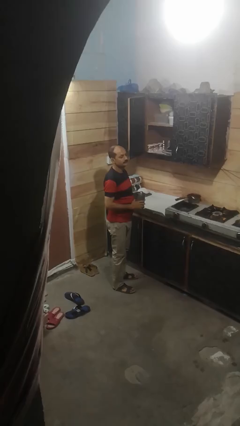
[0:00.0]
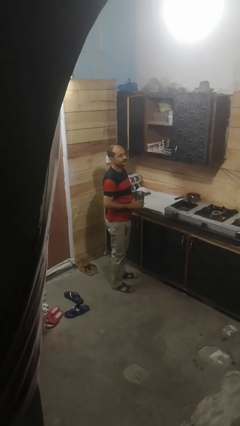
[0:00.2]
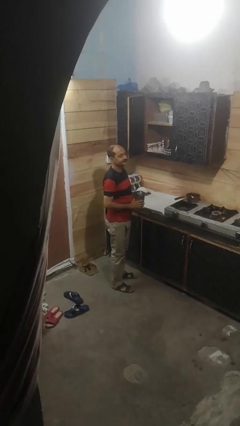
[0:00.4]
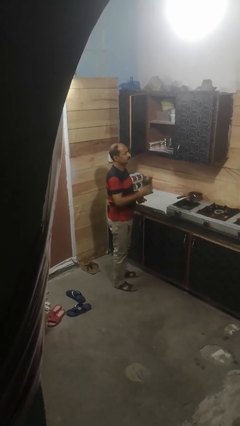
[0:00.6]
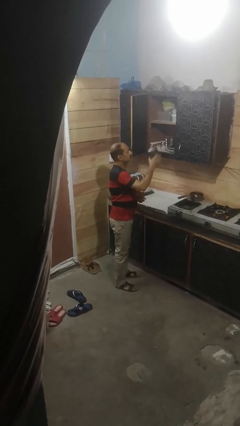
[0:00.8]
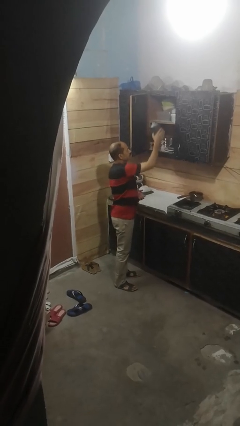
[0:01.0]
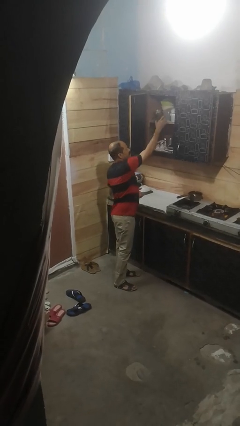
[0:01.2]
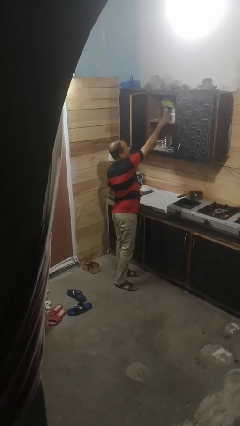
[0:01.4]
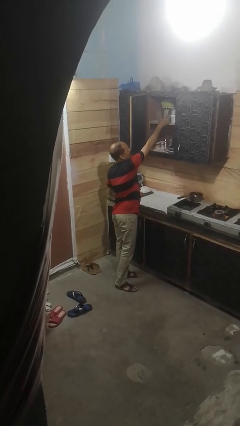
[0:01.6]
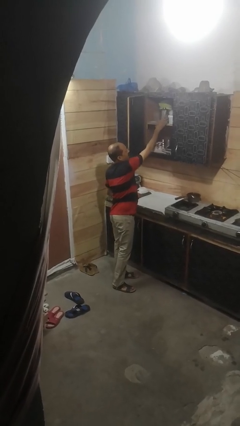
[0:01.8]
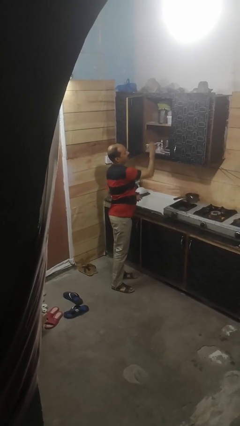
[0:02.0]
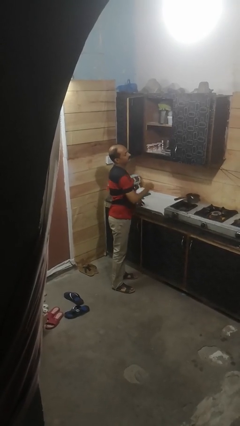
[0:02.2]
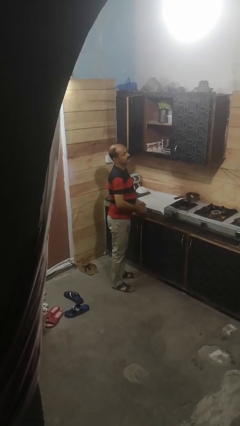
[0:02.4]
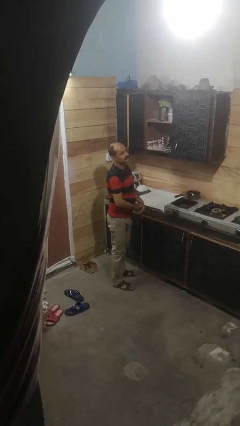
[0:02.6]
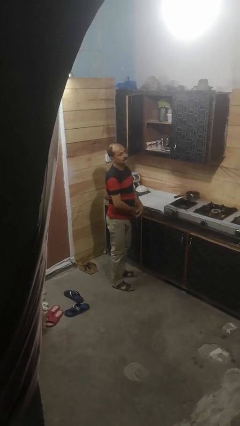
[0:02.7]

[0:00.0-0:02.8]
person puts down object into cabinet

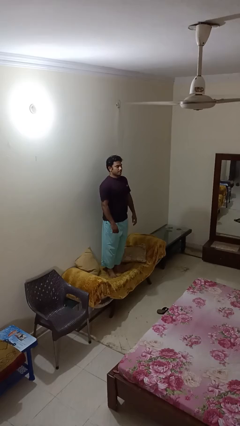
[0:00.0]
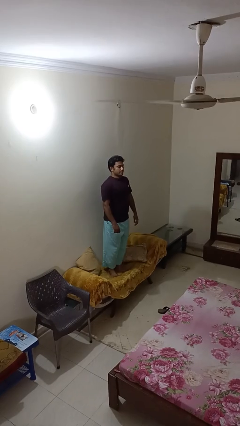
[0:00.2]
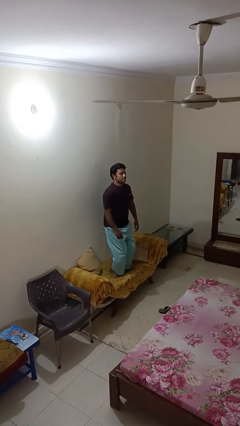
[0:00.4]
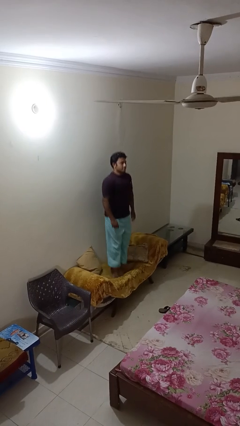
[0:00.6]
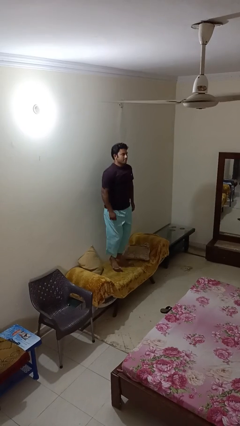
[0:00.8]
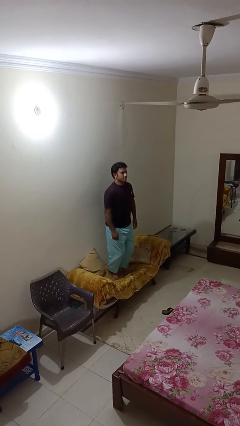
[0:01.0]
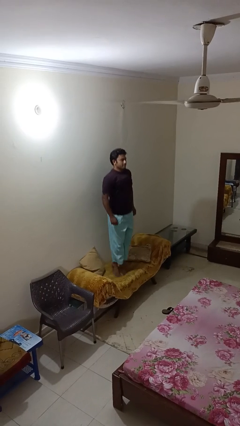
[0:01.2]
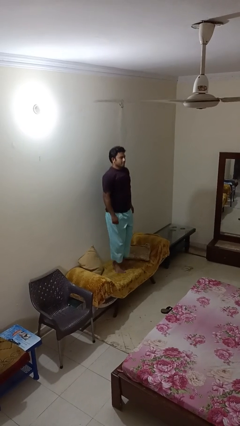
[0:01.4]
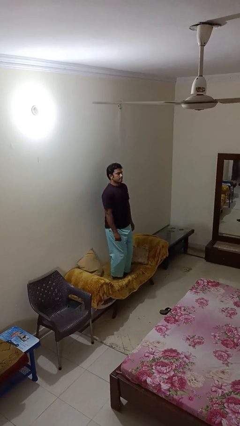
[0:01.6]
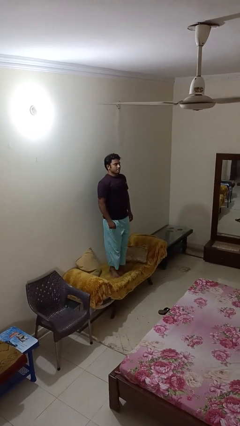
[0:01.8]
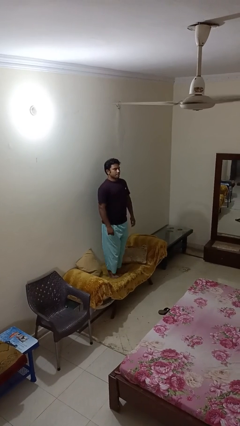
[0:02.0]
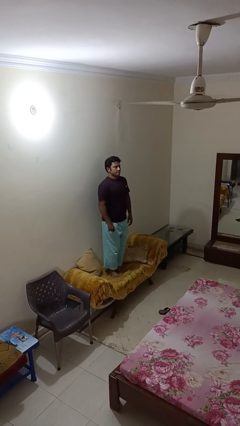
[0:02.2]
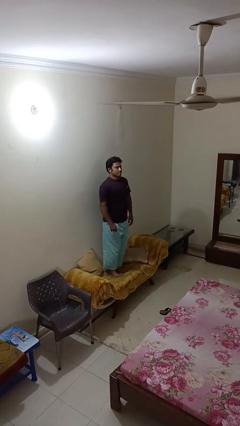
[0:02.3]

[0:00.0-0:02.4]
person jumps on couch

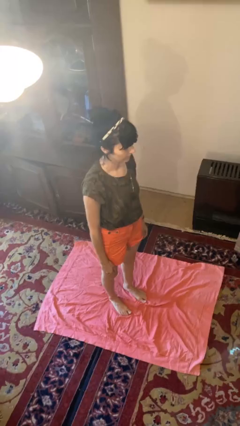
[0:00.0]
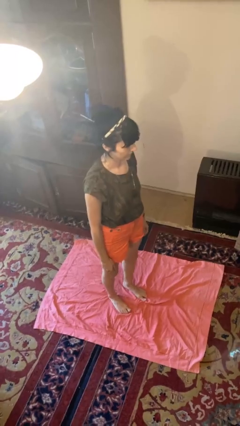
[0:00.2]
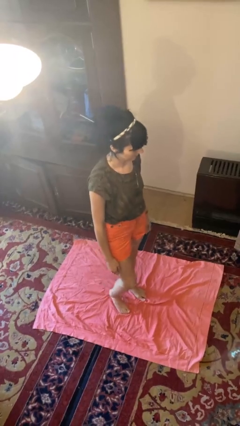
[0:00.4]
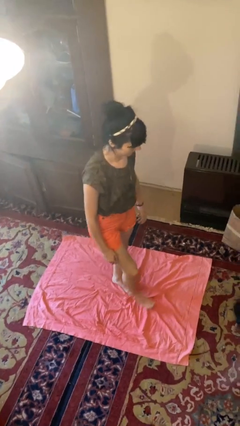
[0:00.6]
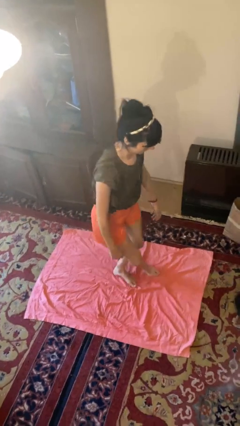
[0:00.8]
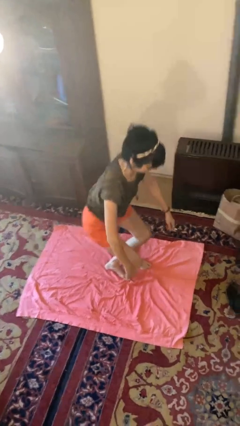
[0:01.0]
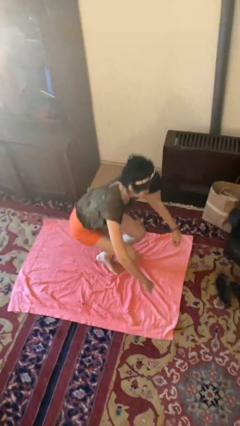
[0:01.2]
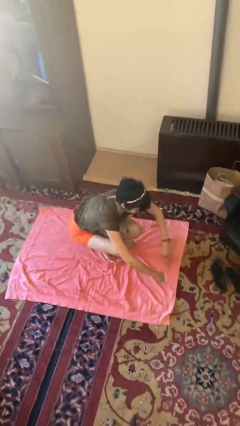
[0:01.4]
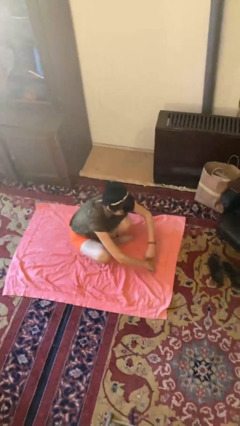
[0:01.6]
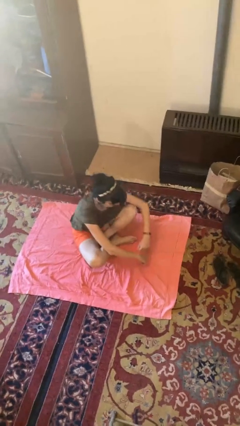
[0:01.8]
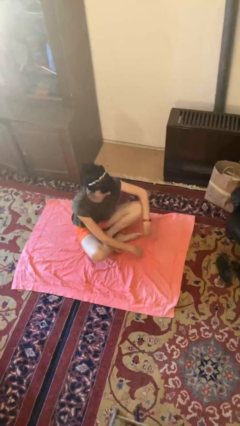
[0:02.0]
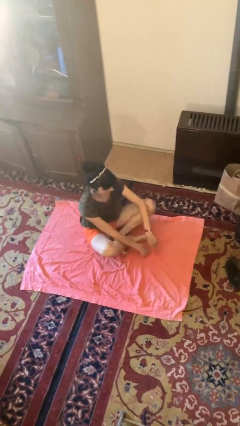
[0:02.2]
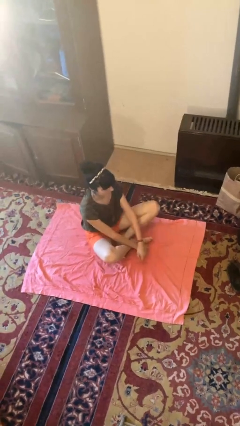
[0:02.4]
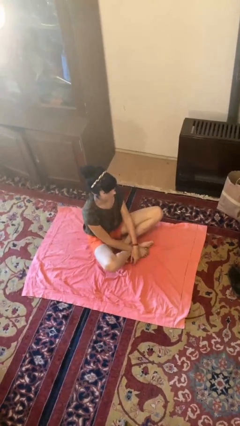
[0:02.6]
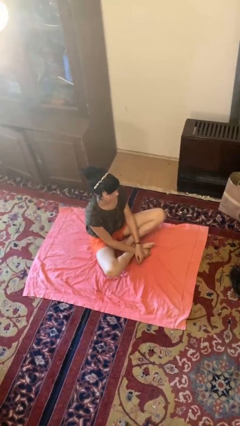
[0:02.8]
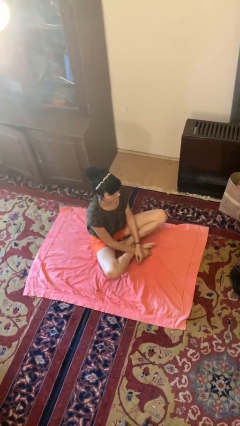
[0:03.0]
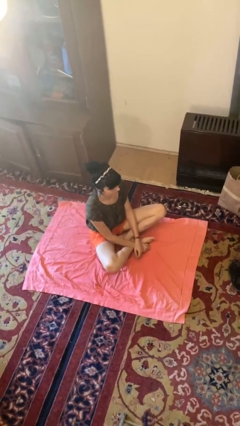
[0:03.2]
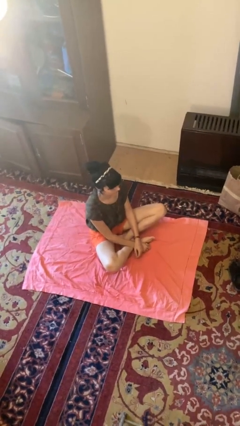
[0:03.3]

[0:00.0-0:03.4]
person sits crisscross

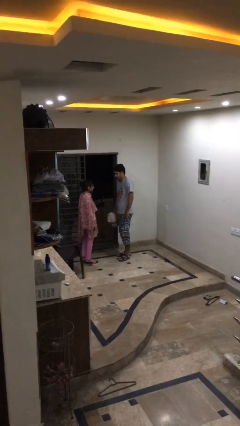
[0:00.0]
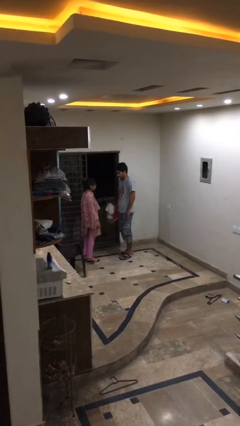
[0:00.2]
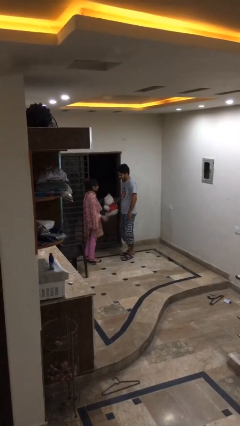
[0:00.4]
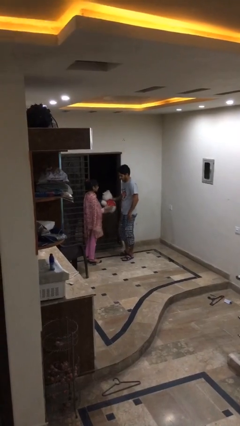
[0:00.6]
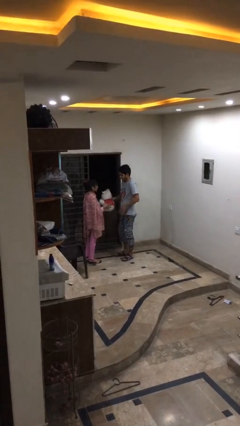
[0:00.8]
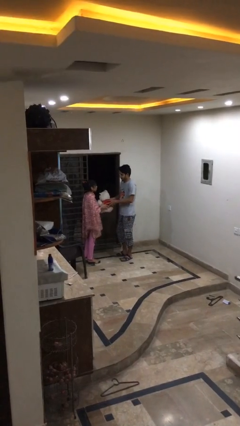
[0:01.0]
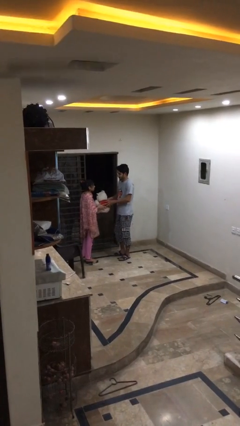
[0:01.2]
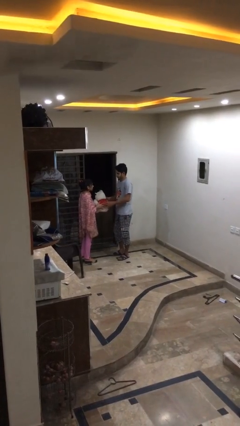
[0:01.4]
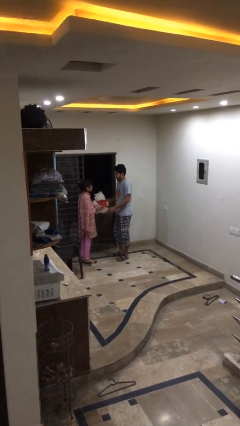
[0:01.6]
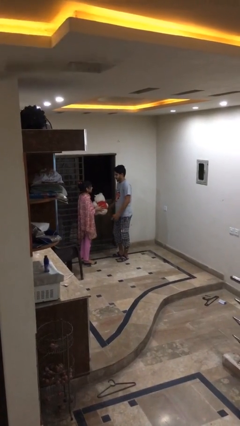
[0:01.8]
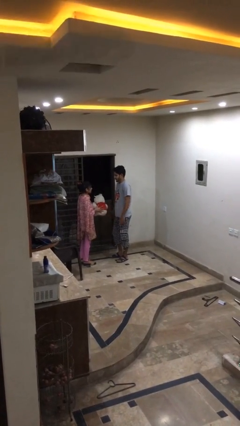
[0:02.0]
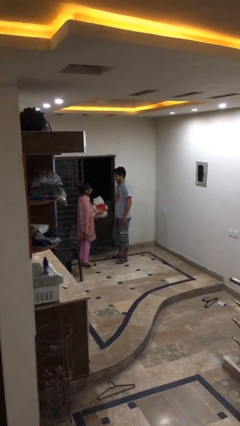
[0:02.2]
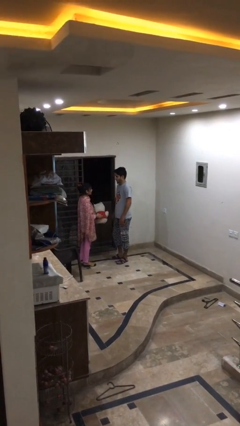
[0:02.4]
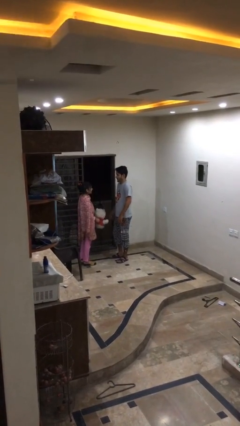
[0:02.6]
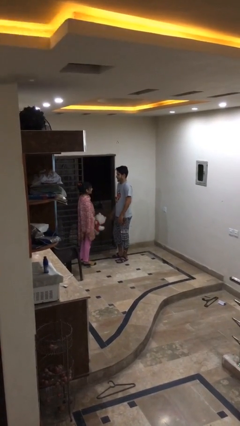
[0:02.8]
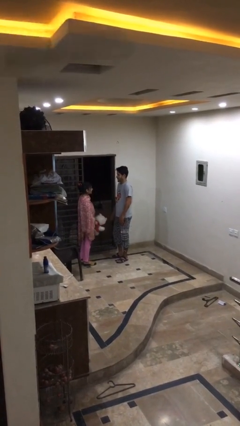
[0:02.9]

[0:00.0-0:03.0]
person transfers object to person

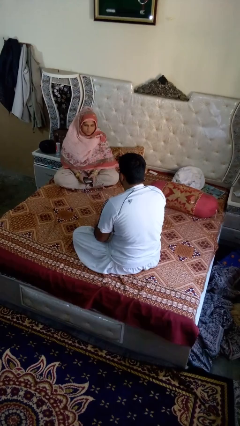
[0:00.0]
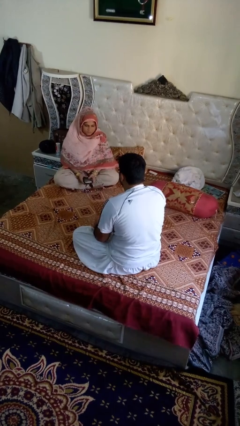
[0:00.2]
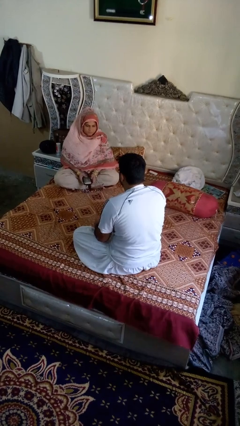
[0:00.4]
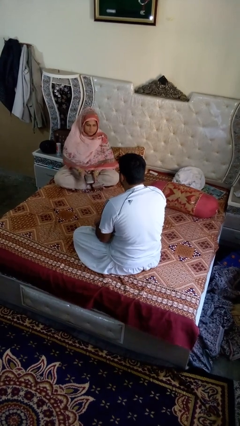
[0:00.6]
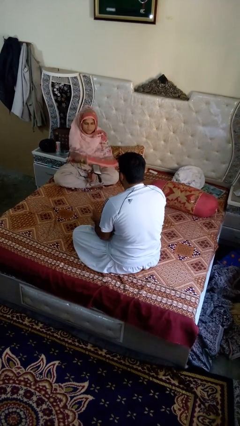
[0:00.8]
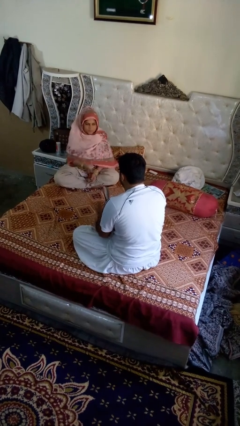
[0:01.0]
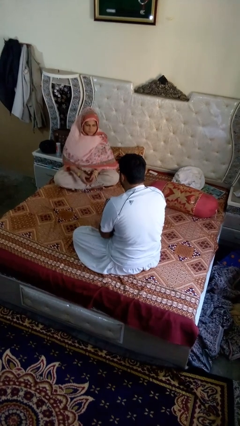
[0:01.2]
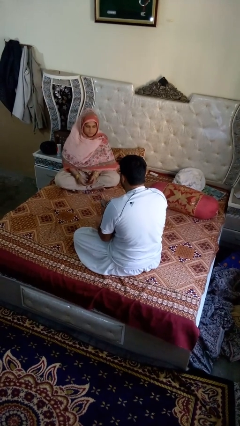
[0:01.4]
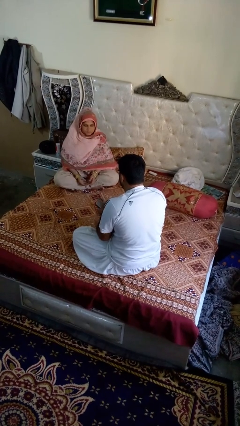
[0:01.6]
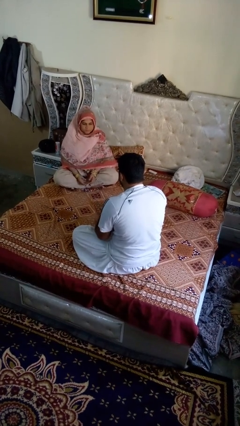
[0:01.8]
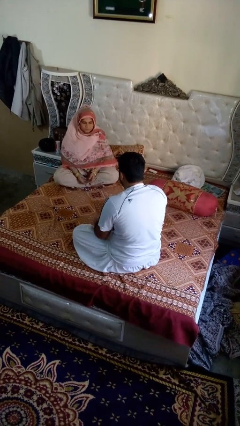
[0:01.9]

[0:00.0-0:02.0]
person catches object from person

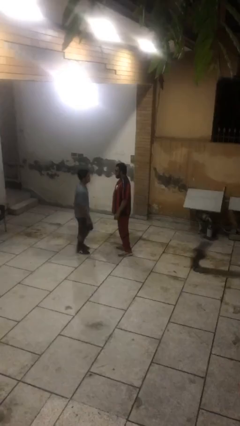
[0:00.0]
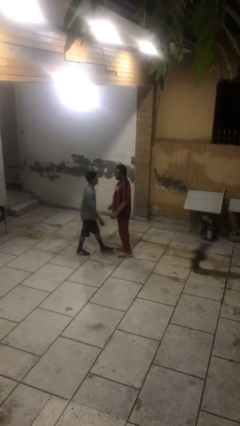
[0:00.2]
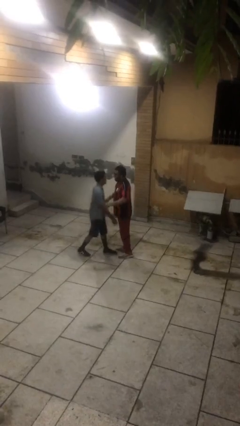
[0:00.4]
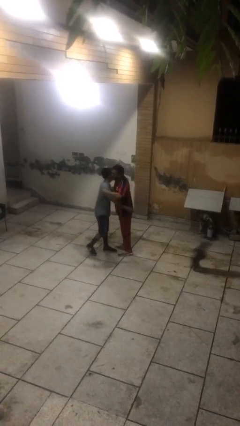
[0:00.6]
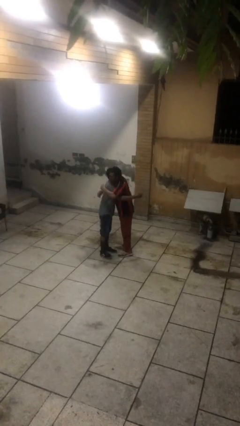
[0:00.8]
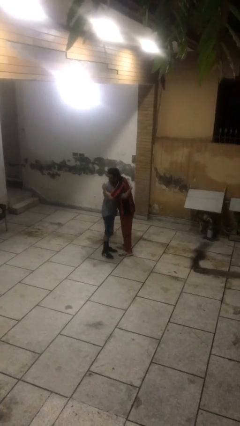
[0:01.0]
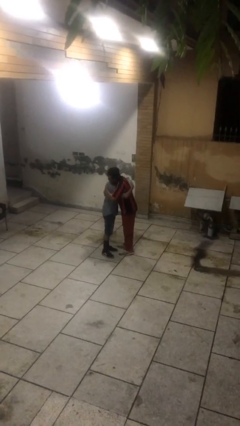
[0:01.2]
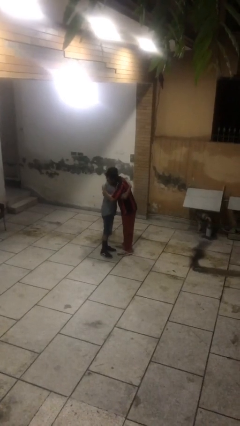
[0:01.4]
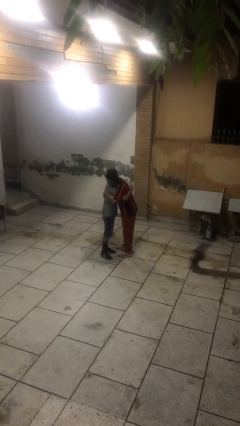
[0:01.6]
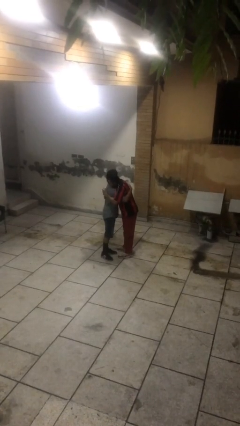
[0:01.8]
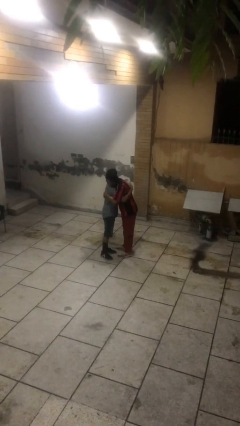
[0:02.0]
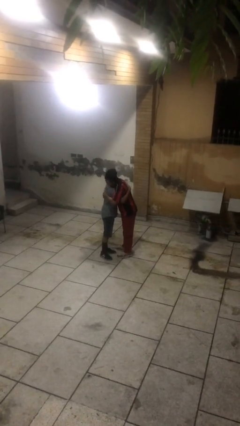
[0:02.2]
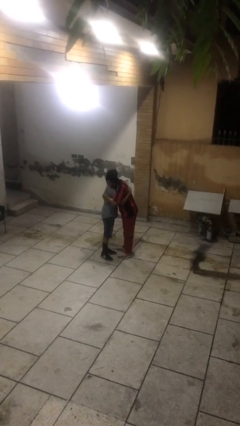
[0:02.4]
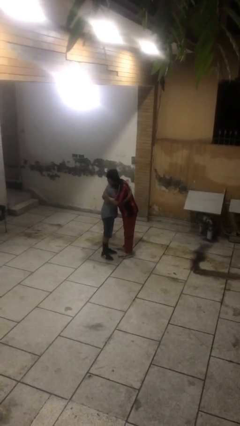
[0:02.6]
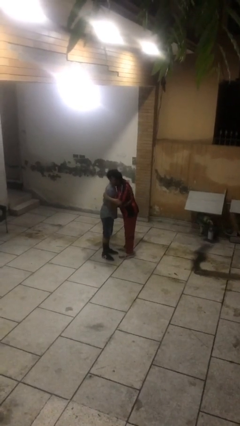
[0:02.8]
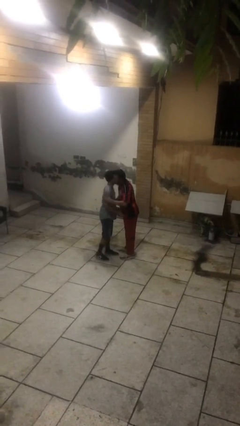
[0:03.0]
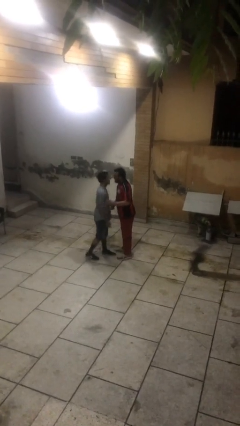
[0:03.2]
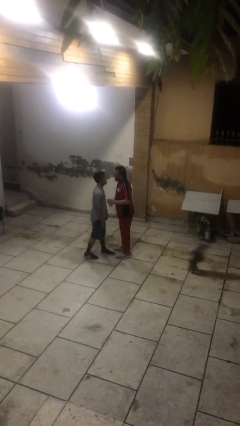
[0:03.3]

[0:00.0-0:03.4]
person embraces person

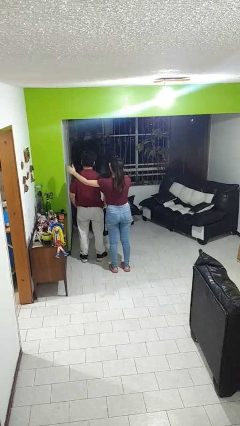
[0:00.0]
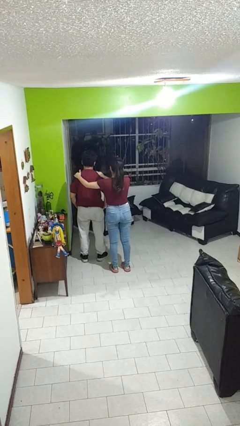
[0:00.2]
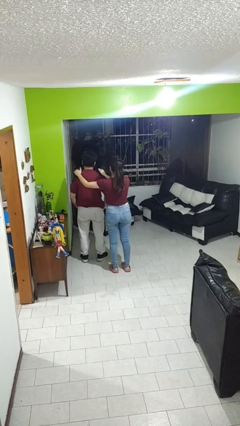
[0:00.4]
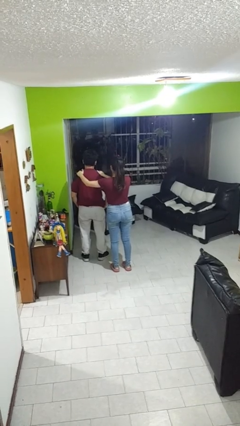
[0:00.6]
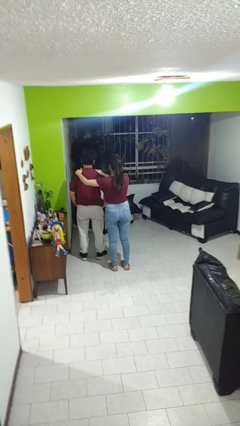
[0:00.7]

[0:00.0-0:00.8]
person pounds shoulders of person
